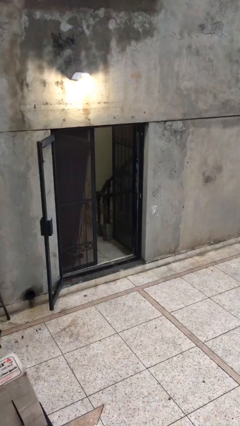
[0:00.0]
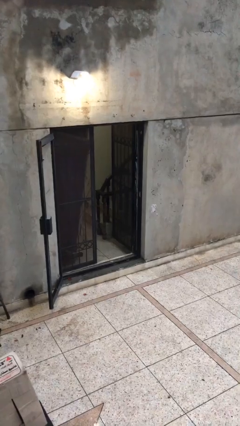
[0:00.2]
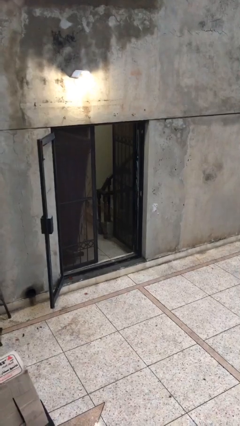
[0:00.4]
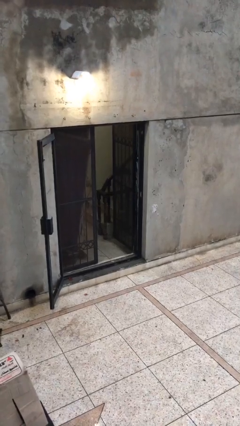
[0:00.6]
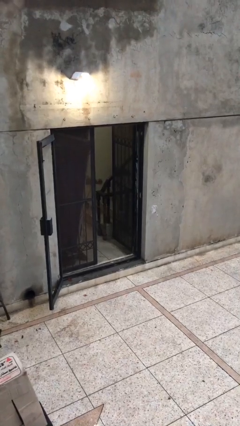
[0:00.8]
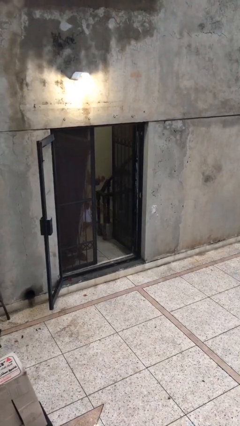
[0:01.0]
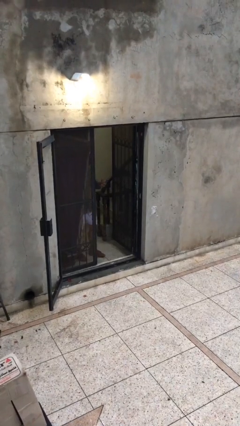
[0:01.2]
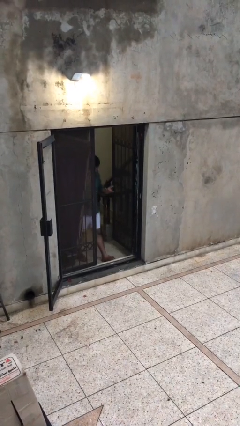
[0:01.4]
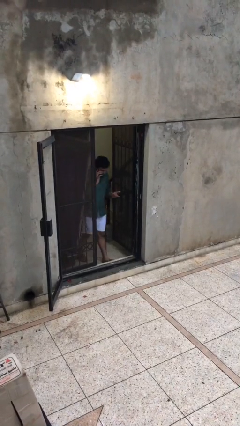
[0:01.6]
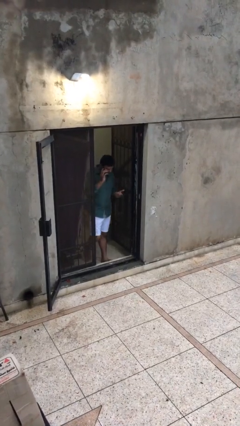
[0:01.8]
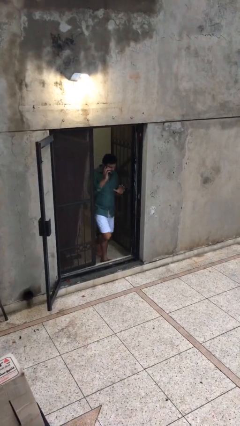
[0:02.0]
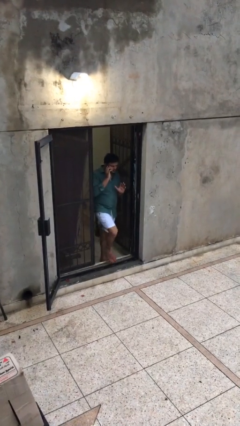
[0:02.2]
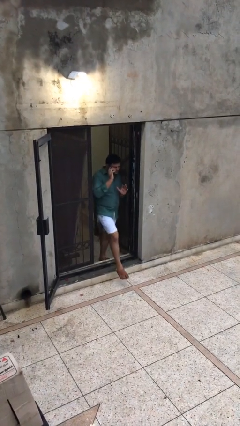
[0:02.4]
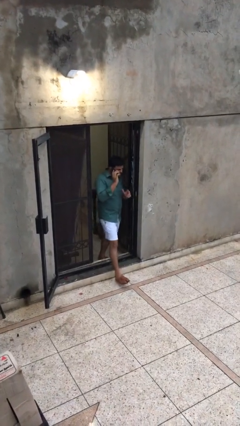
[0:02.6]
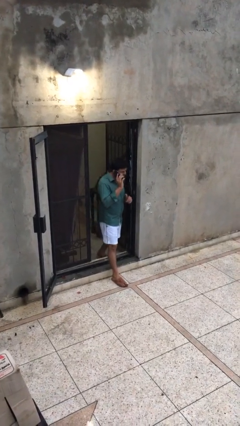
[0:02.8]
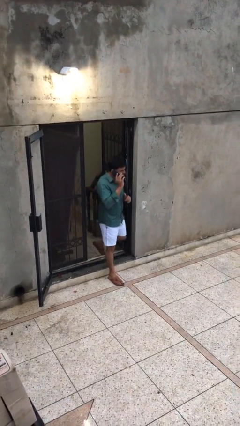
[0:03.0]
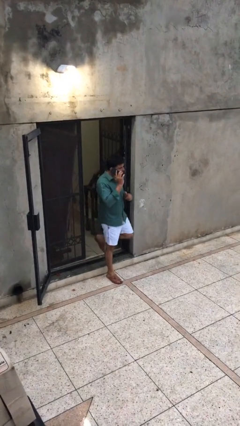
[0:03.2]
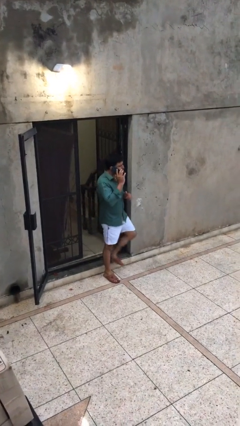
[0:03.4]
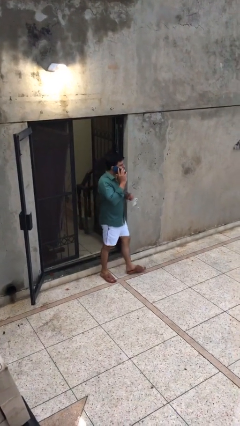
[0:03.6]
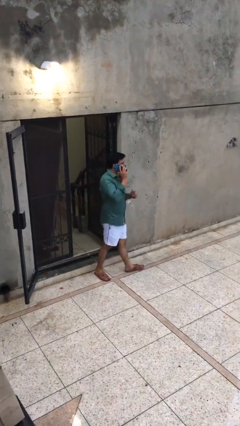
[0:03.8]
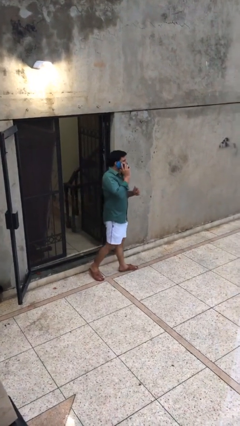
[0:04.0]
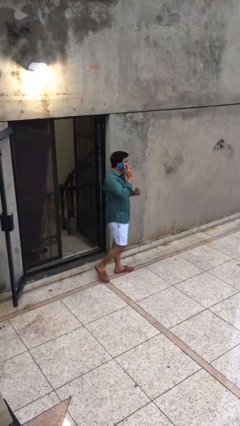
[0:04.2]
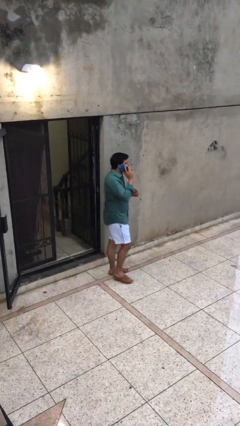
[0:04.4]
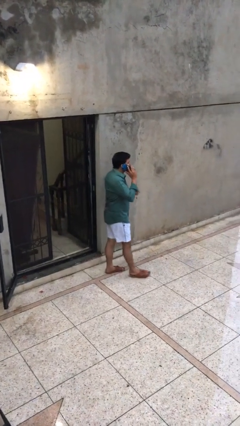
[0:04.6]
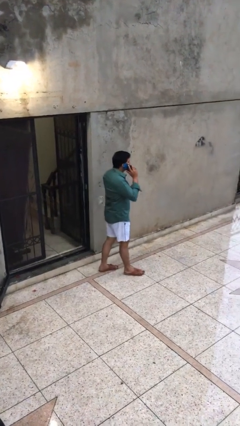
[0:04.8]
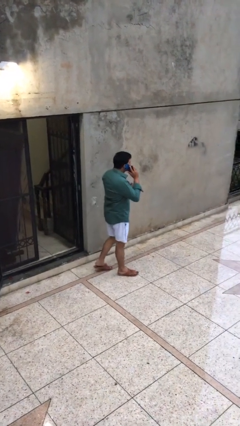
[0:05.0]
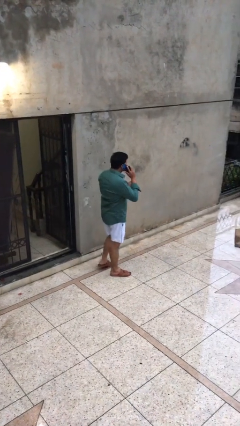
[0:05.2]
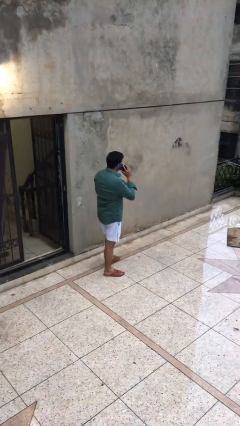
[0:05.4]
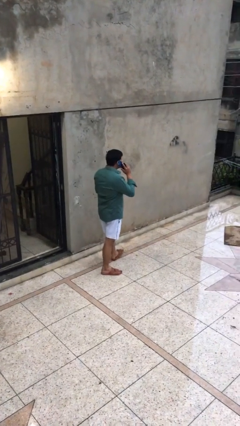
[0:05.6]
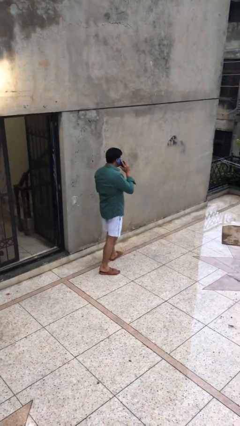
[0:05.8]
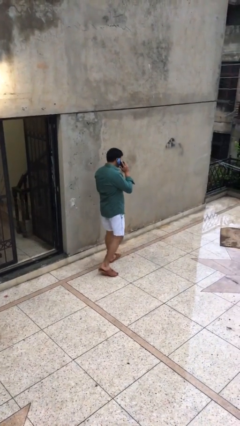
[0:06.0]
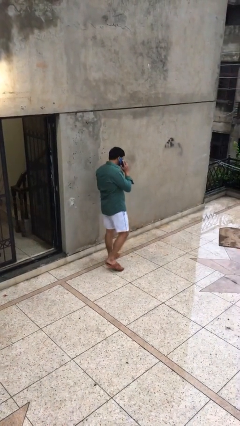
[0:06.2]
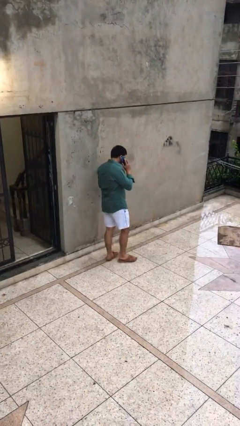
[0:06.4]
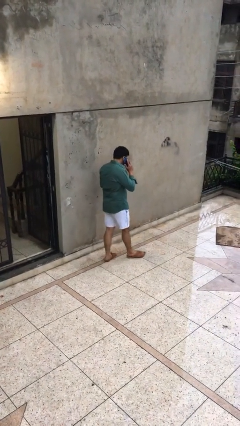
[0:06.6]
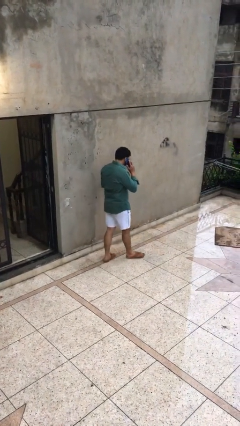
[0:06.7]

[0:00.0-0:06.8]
person enters scene through structure

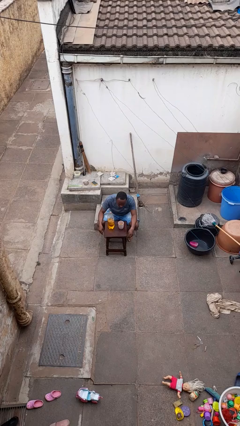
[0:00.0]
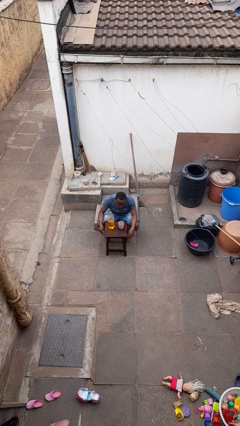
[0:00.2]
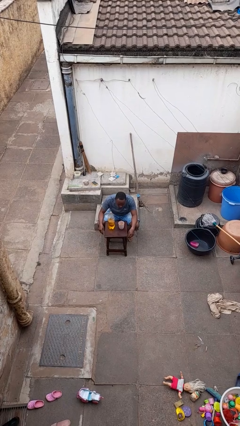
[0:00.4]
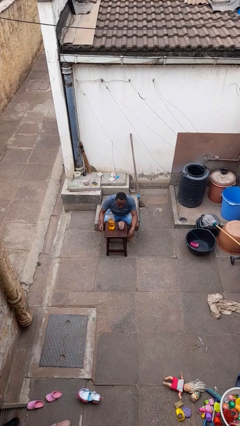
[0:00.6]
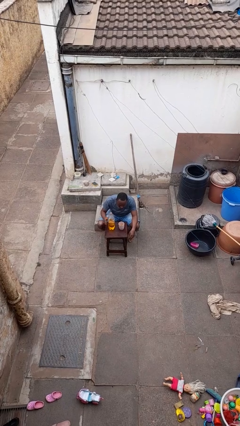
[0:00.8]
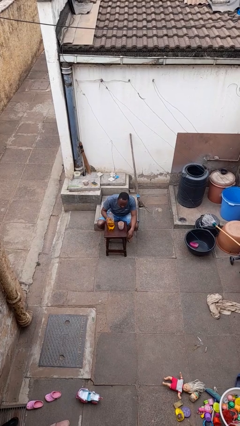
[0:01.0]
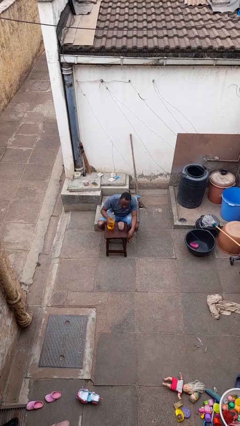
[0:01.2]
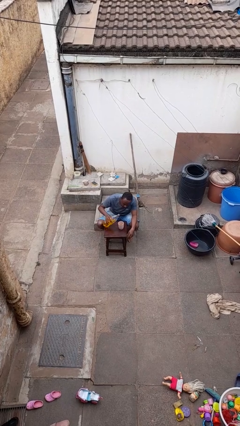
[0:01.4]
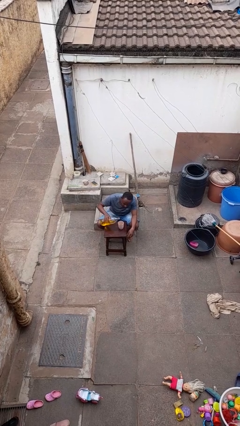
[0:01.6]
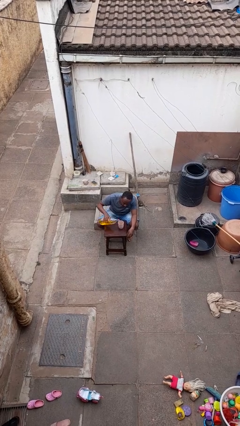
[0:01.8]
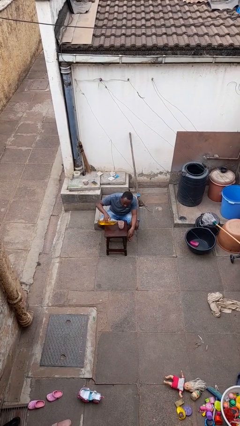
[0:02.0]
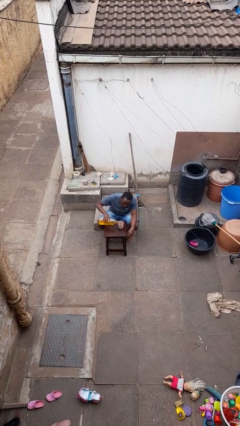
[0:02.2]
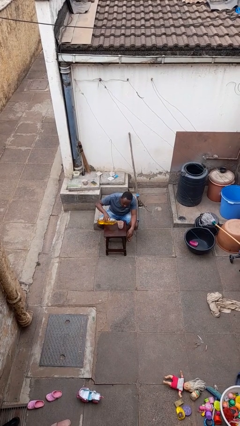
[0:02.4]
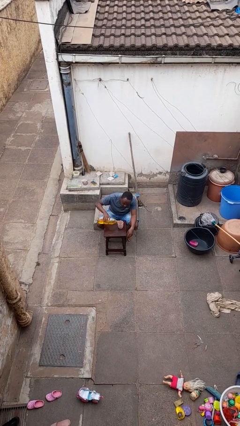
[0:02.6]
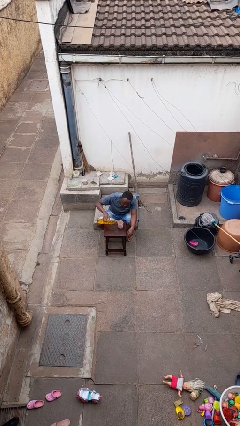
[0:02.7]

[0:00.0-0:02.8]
person pours liquid into cup

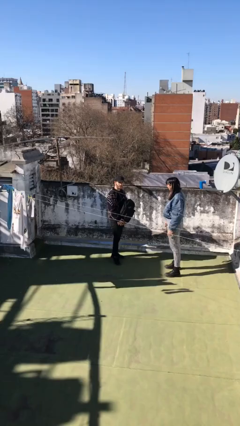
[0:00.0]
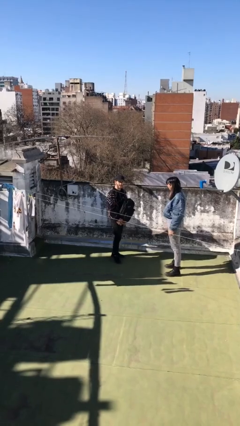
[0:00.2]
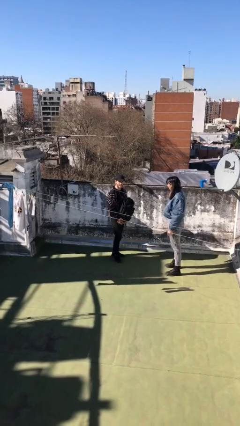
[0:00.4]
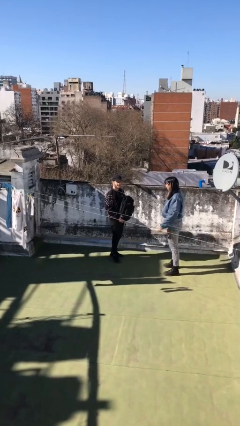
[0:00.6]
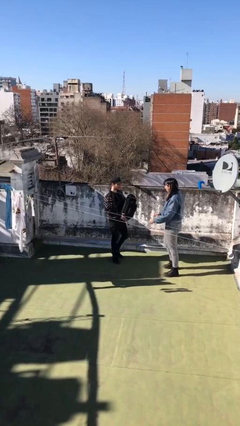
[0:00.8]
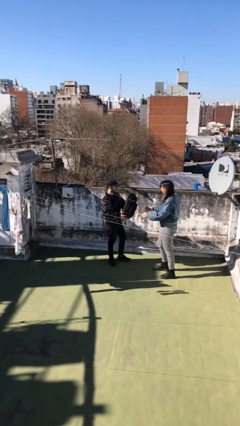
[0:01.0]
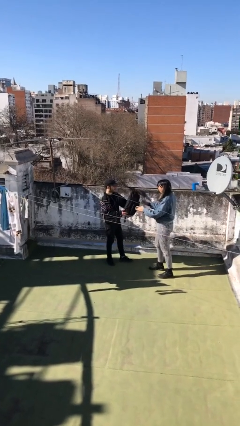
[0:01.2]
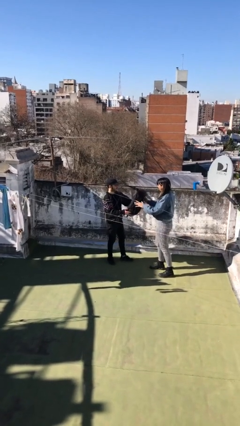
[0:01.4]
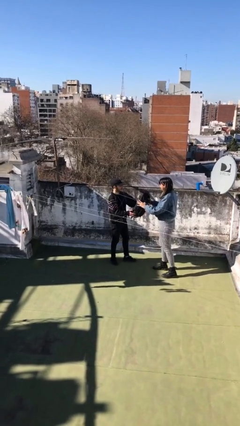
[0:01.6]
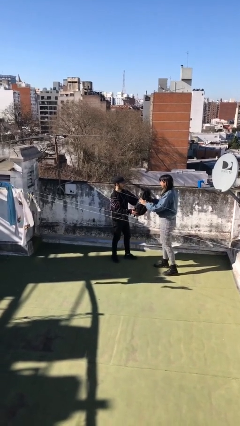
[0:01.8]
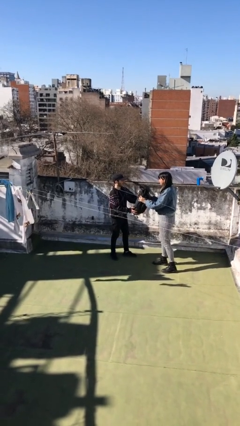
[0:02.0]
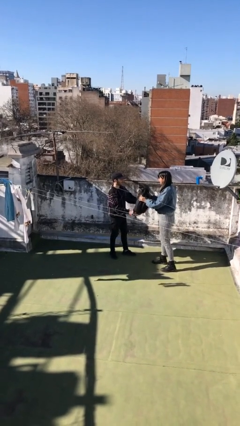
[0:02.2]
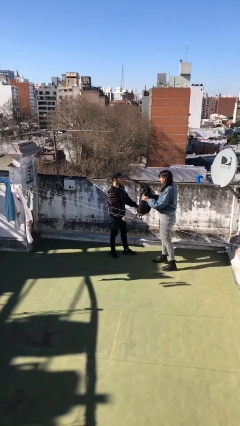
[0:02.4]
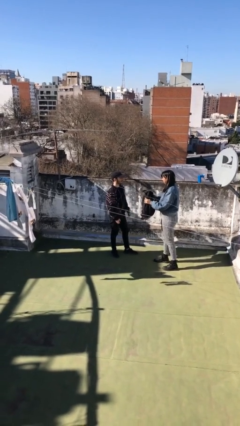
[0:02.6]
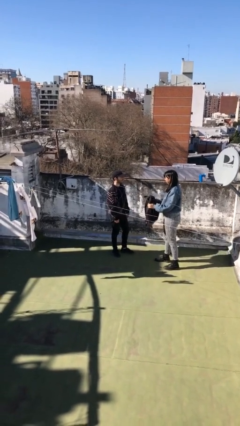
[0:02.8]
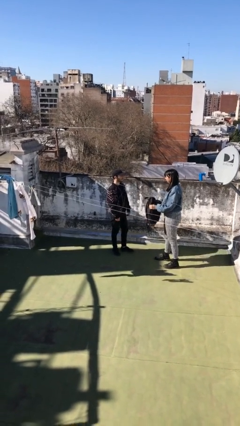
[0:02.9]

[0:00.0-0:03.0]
person transfers object to person

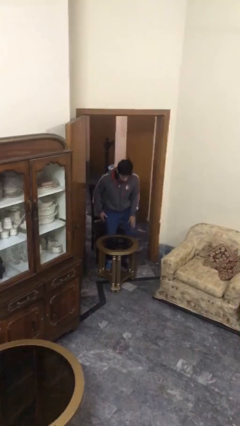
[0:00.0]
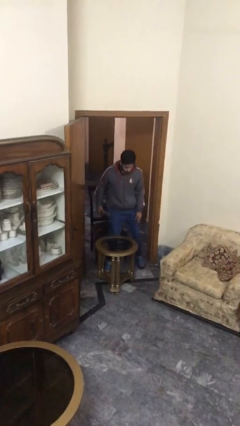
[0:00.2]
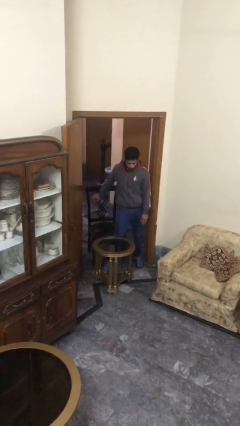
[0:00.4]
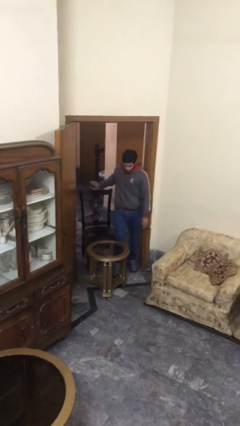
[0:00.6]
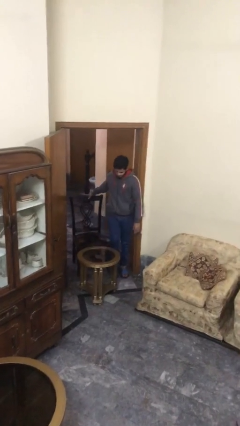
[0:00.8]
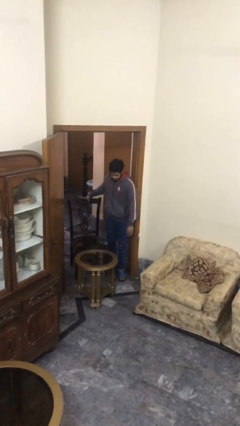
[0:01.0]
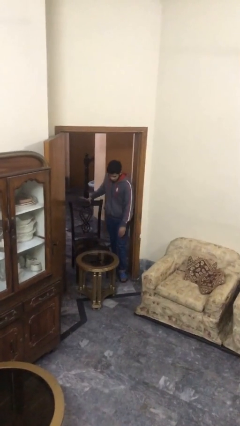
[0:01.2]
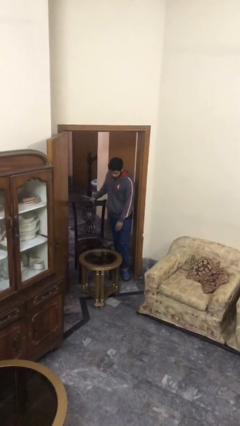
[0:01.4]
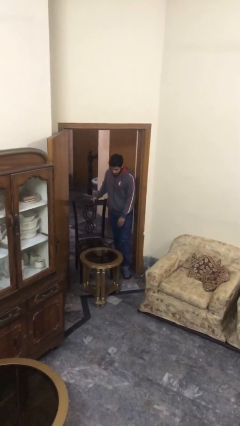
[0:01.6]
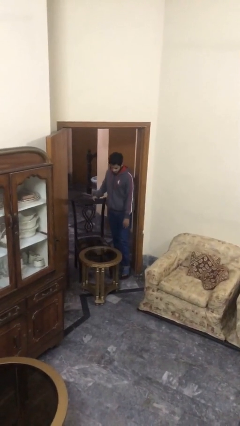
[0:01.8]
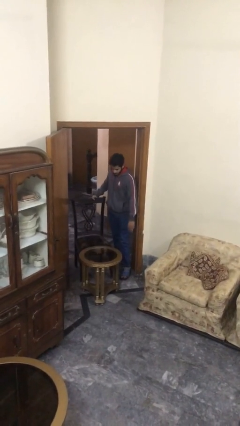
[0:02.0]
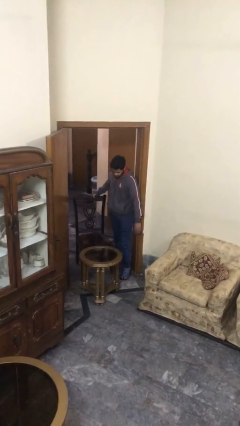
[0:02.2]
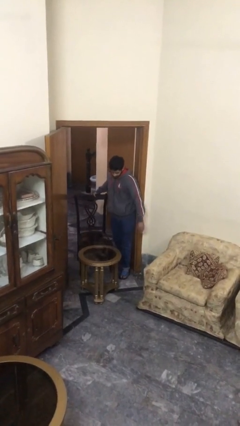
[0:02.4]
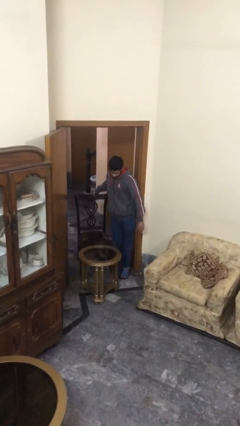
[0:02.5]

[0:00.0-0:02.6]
person stands up

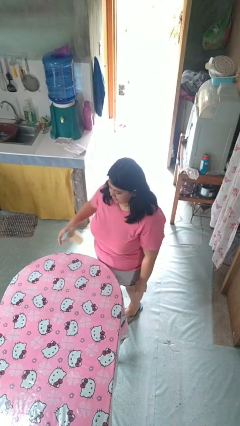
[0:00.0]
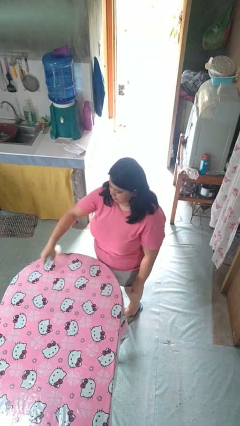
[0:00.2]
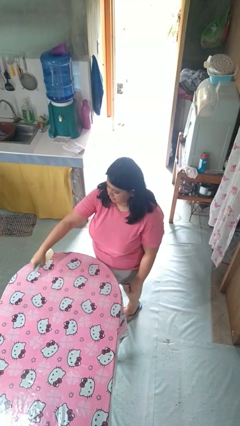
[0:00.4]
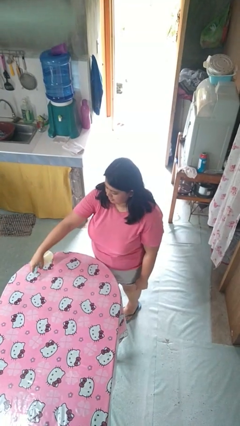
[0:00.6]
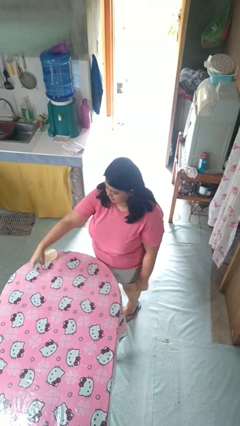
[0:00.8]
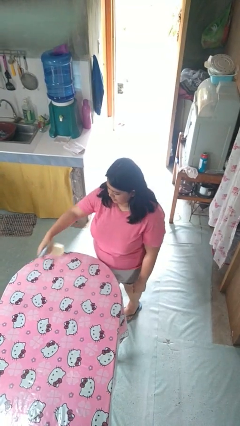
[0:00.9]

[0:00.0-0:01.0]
person sprays from bottle

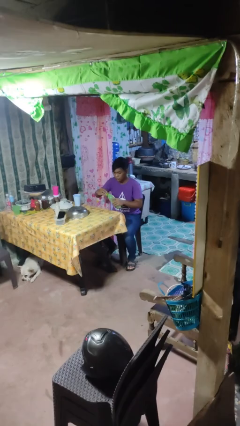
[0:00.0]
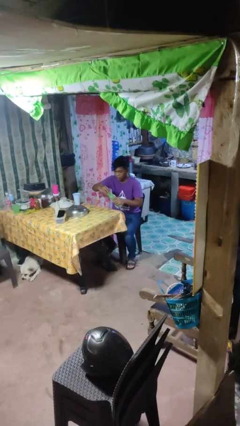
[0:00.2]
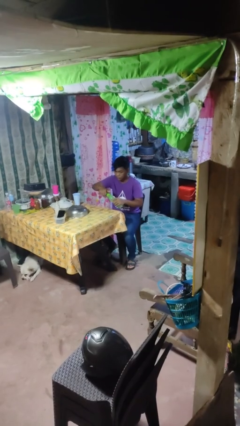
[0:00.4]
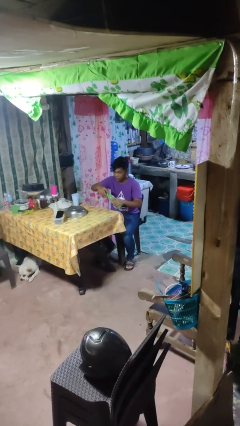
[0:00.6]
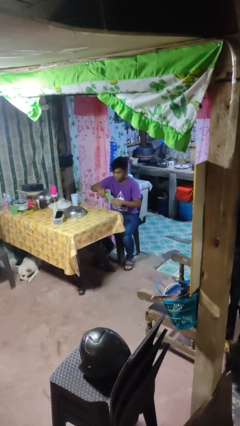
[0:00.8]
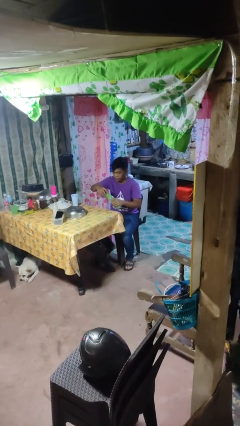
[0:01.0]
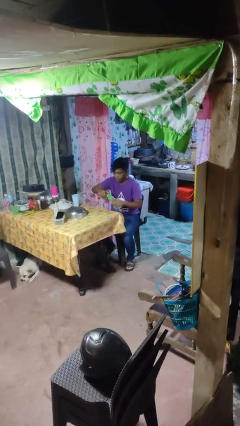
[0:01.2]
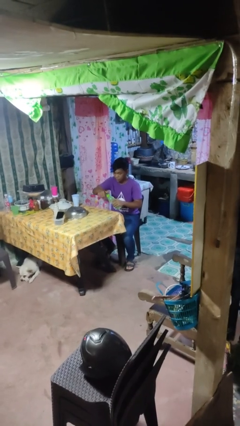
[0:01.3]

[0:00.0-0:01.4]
person screws lid to bottle

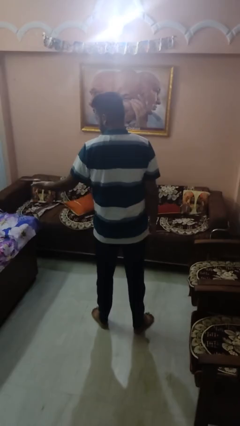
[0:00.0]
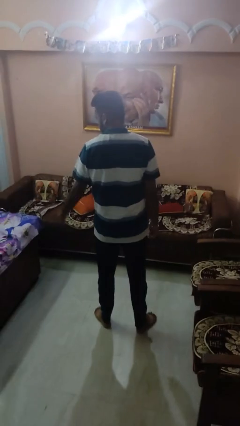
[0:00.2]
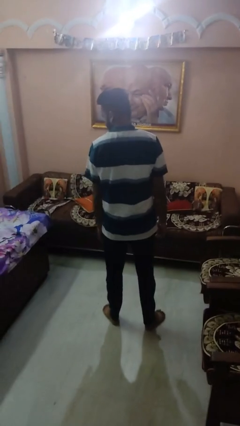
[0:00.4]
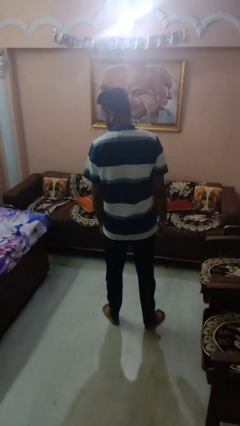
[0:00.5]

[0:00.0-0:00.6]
person throws object on bed
